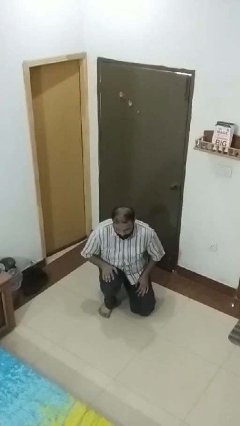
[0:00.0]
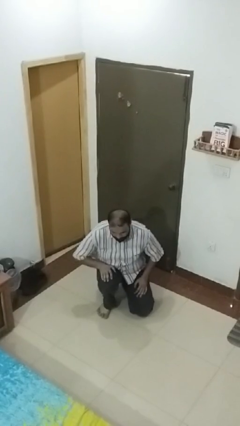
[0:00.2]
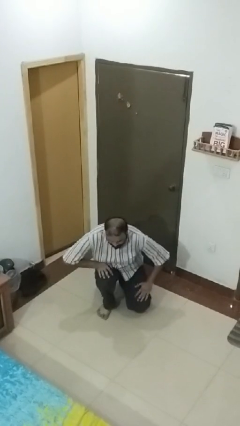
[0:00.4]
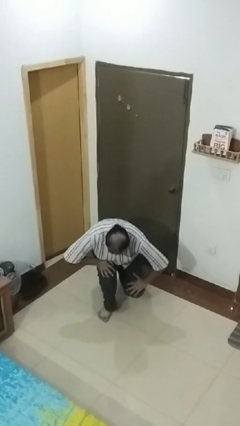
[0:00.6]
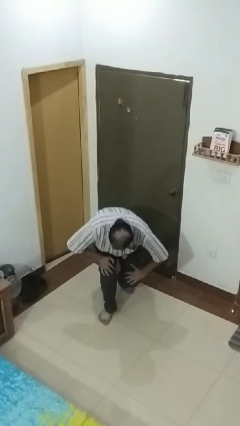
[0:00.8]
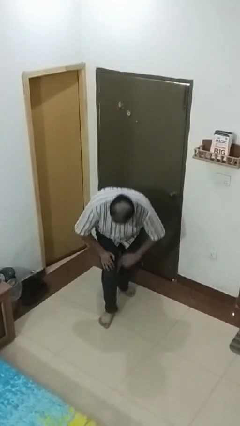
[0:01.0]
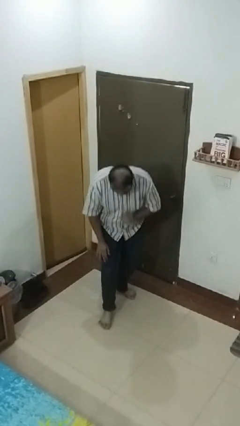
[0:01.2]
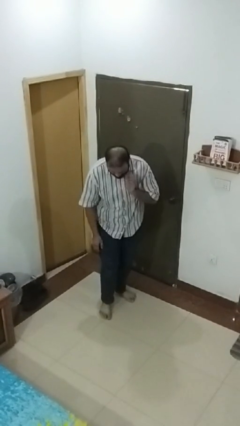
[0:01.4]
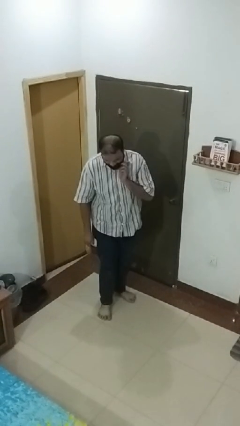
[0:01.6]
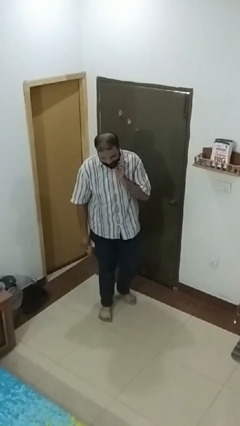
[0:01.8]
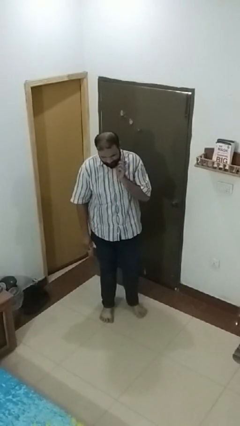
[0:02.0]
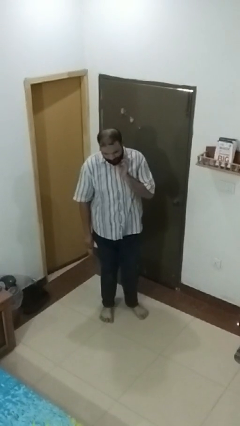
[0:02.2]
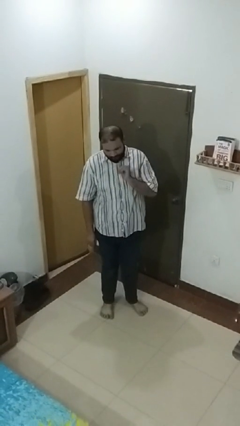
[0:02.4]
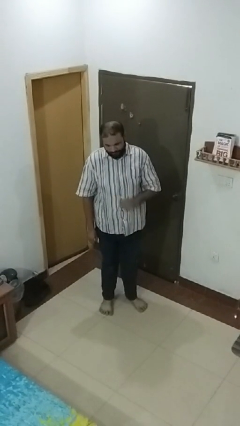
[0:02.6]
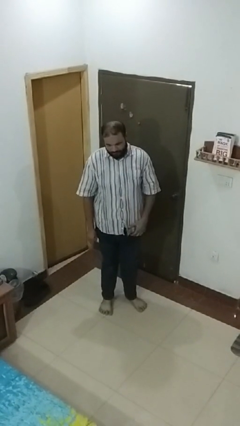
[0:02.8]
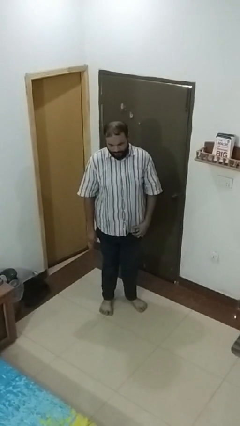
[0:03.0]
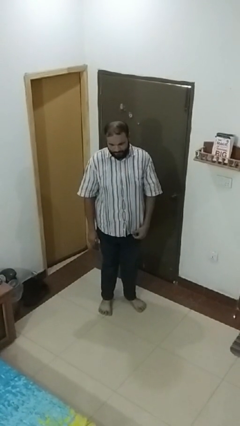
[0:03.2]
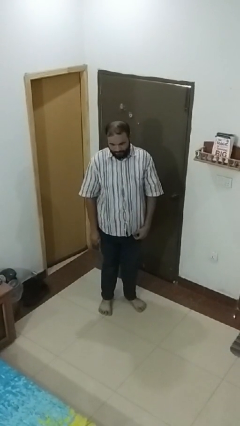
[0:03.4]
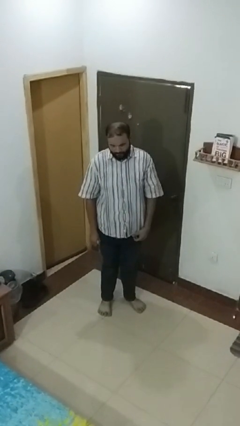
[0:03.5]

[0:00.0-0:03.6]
person stands up from floor

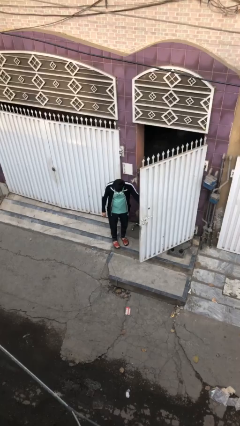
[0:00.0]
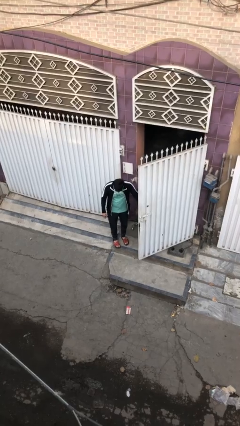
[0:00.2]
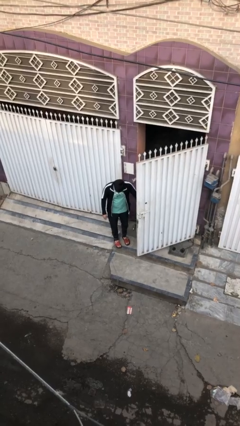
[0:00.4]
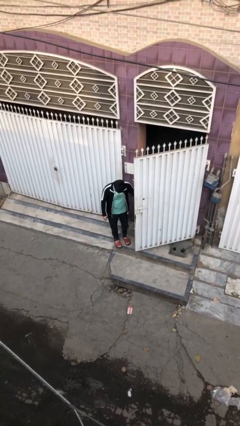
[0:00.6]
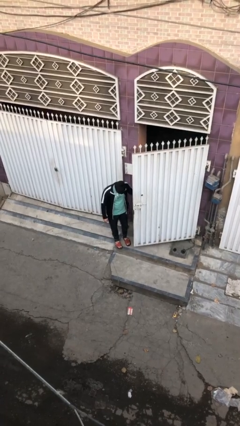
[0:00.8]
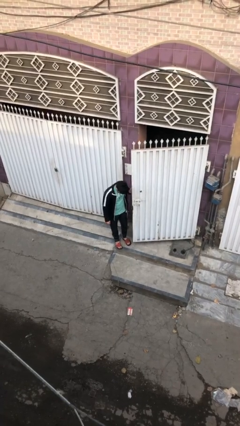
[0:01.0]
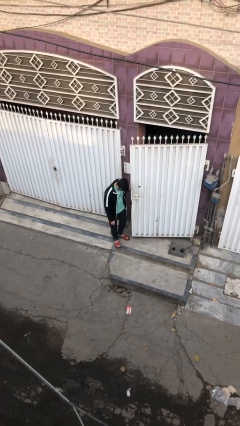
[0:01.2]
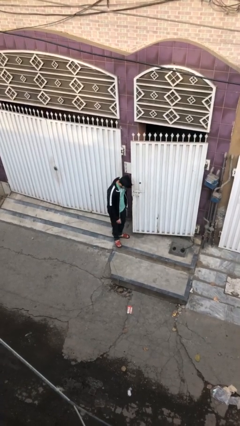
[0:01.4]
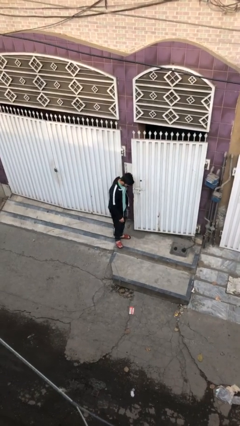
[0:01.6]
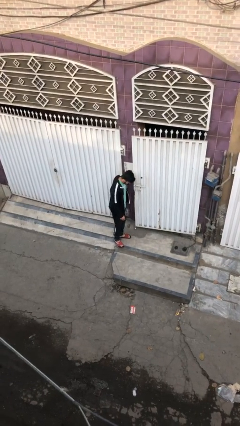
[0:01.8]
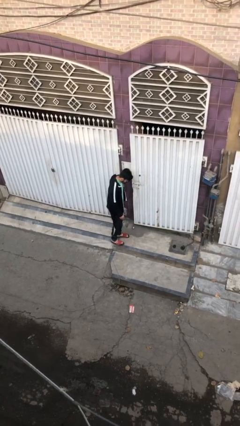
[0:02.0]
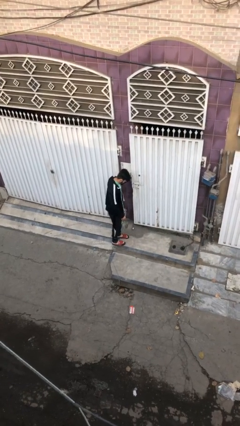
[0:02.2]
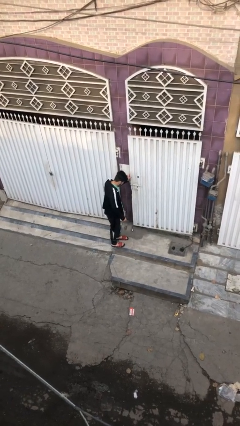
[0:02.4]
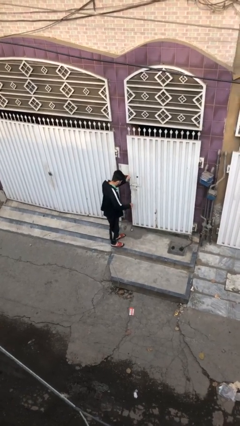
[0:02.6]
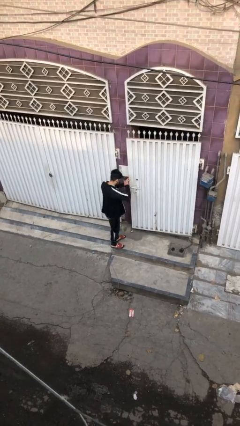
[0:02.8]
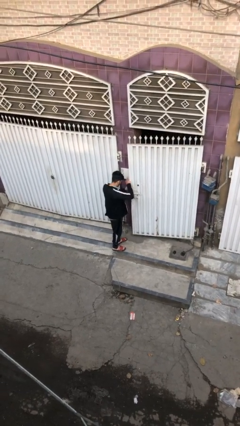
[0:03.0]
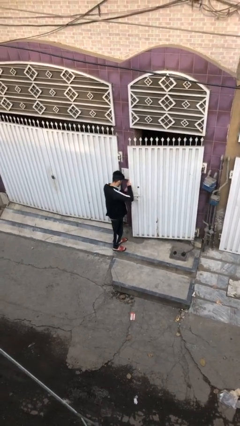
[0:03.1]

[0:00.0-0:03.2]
person closes facility door

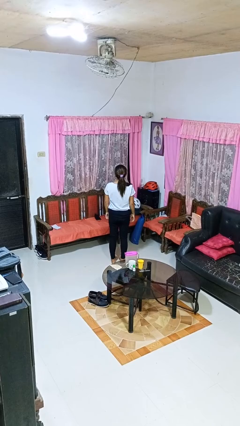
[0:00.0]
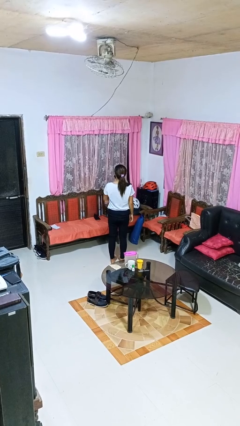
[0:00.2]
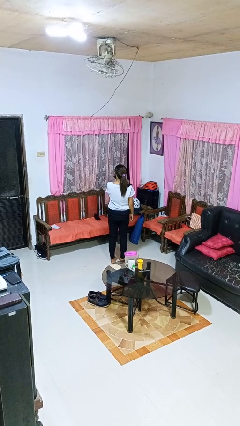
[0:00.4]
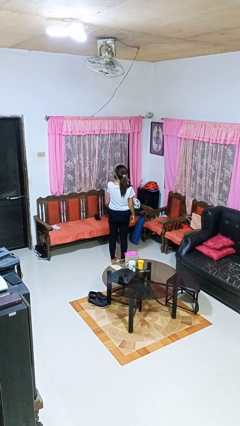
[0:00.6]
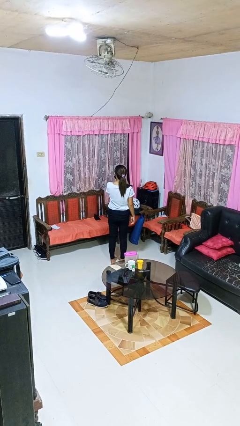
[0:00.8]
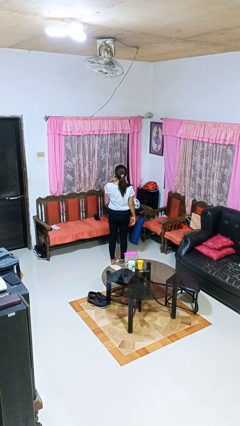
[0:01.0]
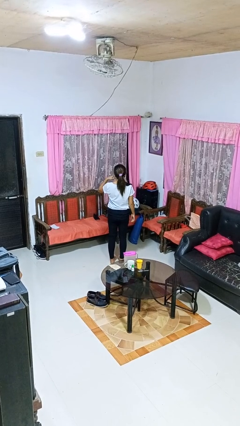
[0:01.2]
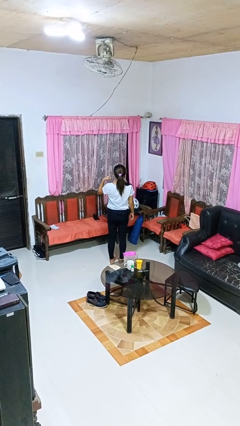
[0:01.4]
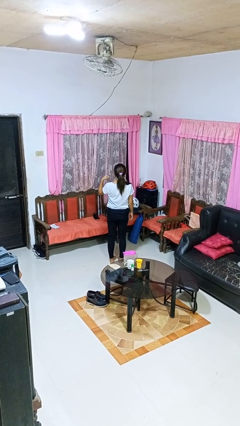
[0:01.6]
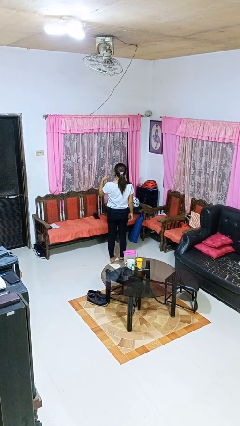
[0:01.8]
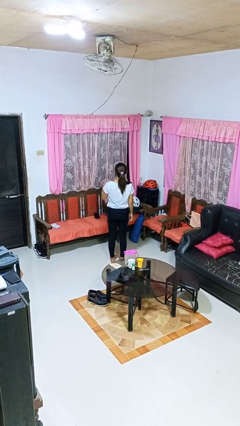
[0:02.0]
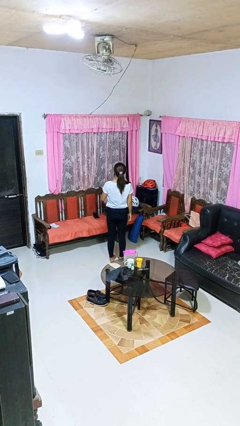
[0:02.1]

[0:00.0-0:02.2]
person gestures cut

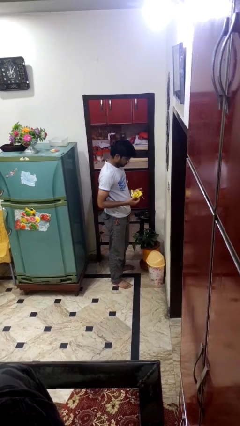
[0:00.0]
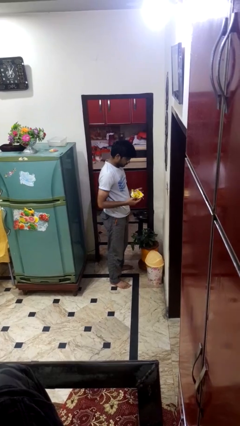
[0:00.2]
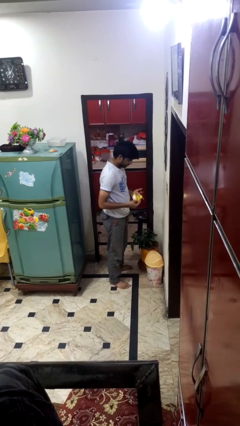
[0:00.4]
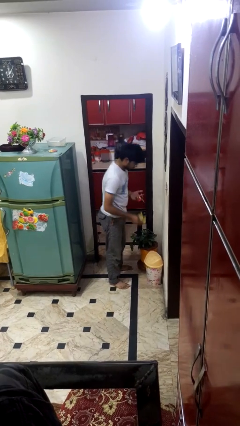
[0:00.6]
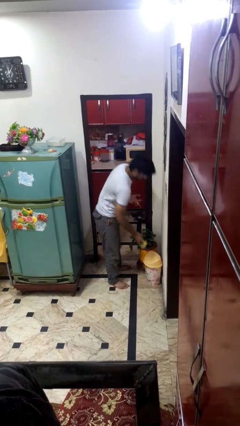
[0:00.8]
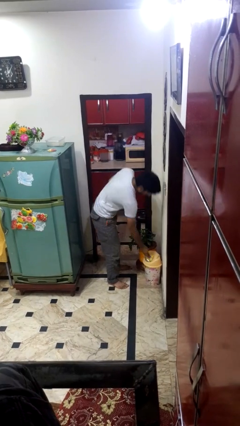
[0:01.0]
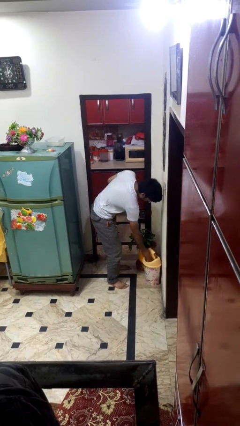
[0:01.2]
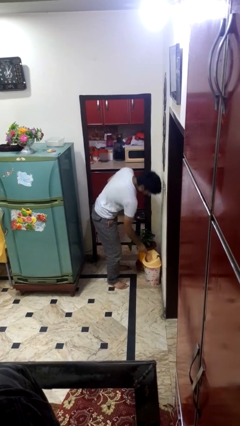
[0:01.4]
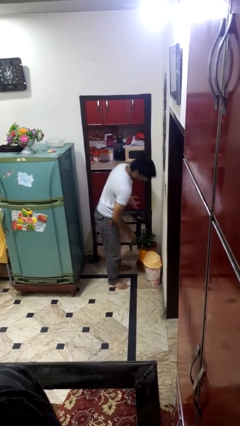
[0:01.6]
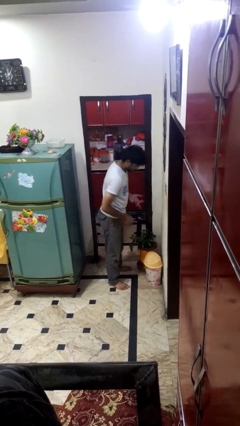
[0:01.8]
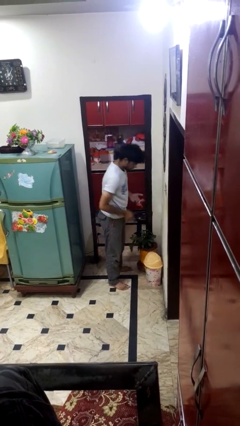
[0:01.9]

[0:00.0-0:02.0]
person discards trash

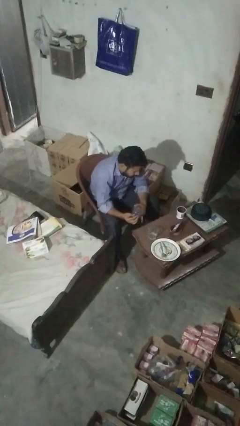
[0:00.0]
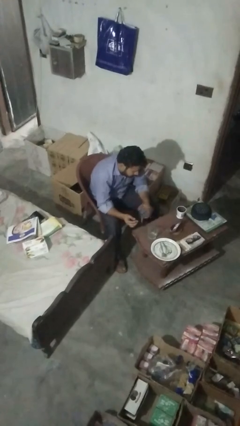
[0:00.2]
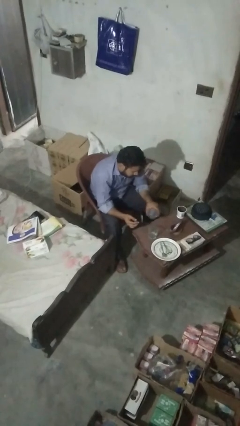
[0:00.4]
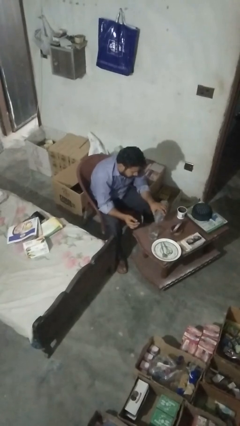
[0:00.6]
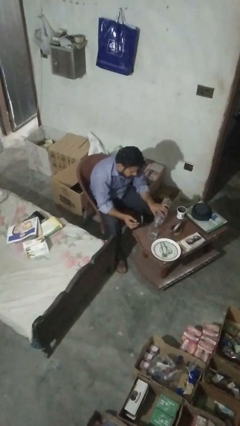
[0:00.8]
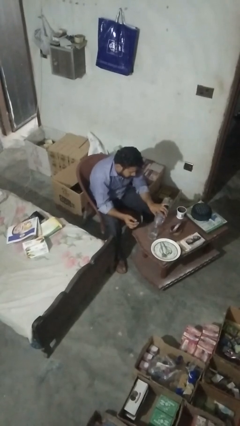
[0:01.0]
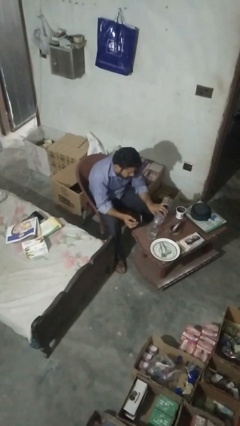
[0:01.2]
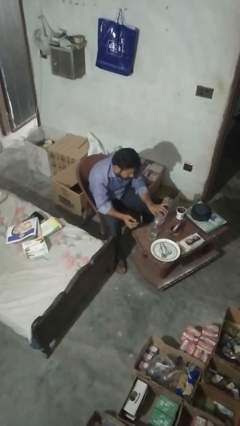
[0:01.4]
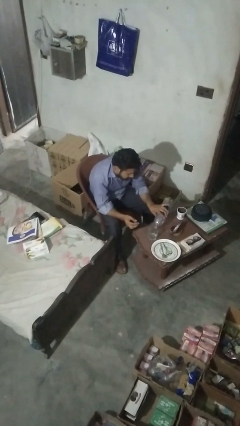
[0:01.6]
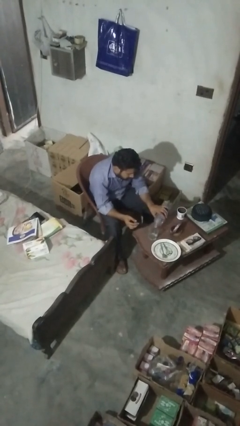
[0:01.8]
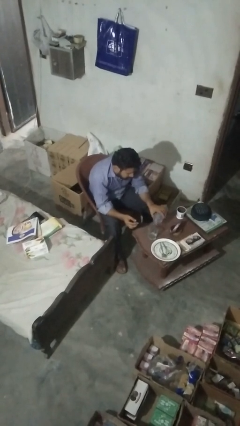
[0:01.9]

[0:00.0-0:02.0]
person pours liquid into cup

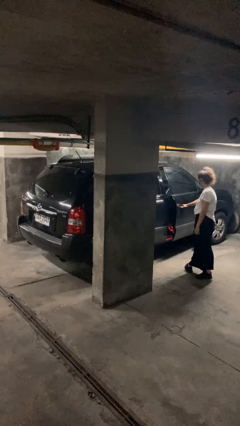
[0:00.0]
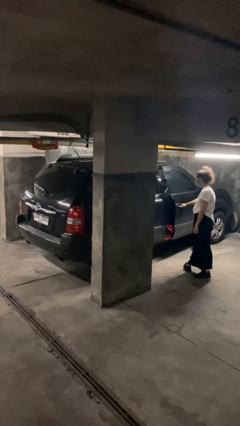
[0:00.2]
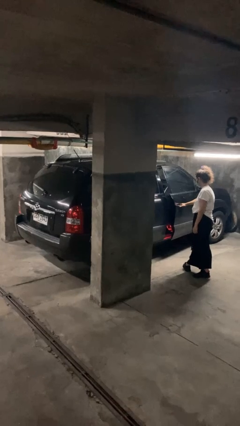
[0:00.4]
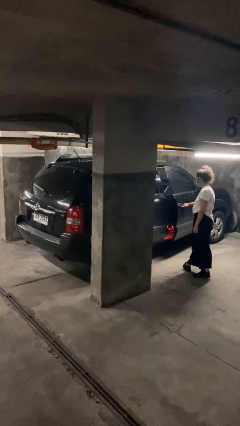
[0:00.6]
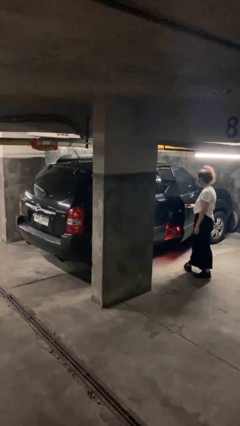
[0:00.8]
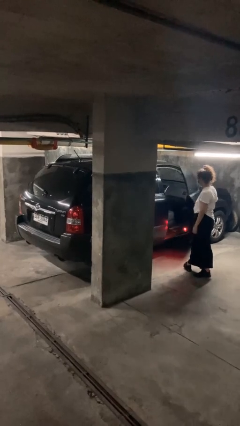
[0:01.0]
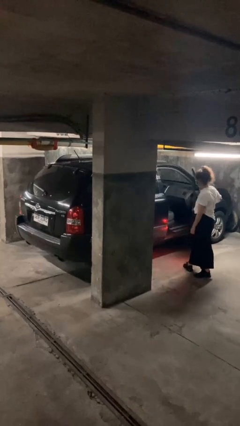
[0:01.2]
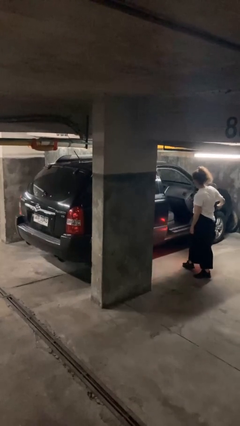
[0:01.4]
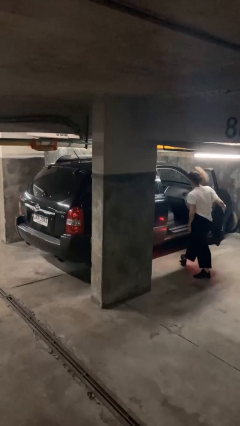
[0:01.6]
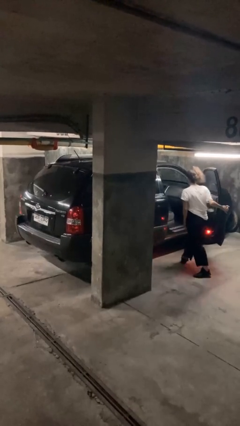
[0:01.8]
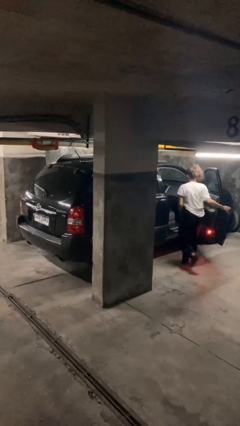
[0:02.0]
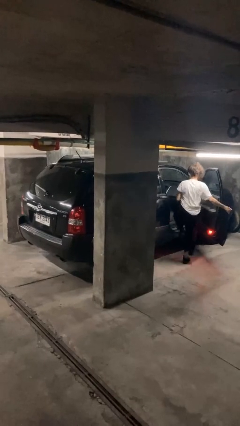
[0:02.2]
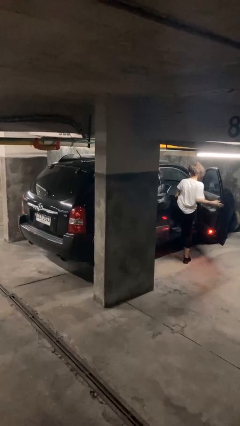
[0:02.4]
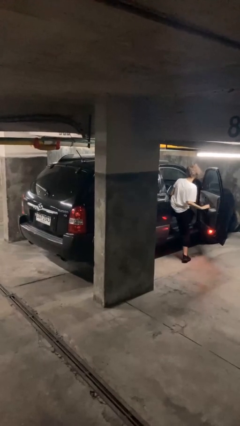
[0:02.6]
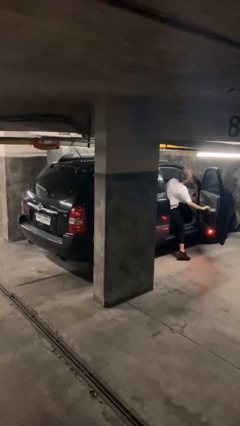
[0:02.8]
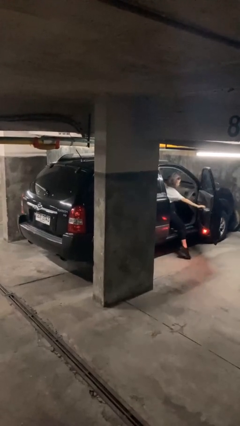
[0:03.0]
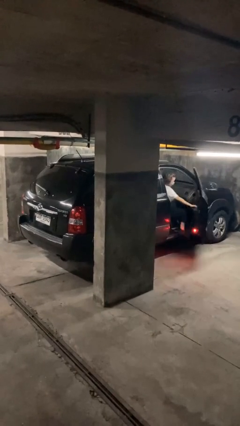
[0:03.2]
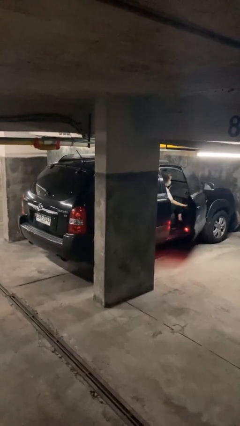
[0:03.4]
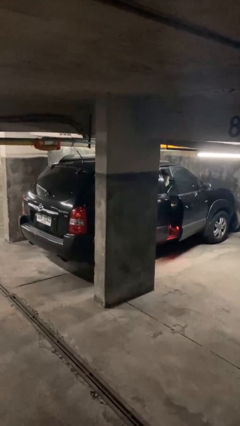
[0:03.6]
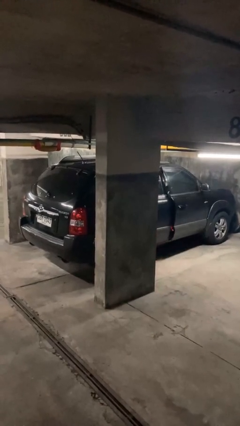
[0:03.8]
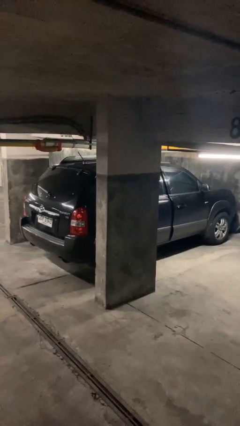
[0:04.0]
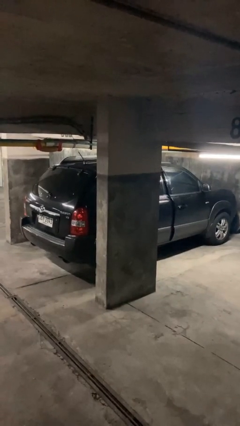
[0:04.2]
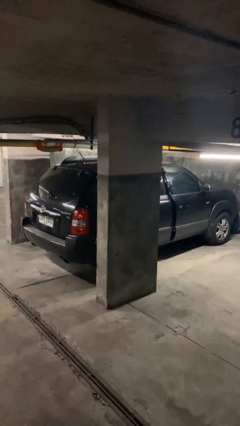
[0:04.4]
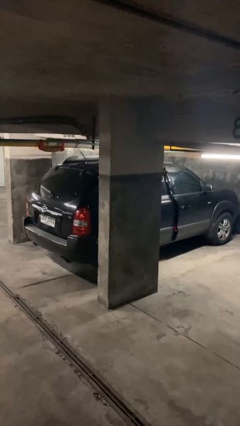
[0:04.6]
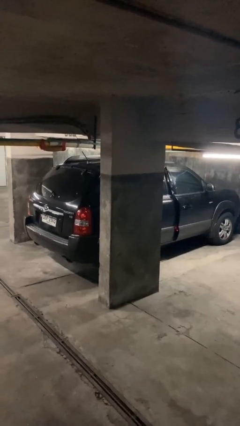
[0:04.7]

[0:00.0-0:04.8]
car picks up person
